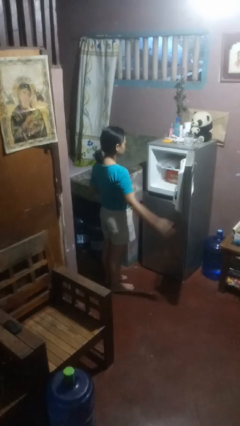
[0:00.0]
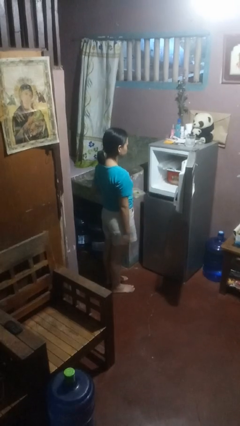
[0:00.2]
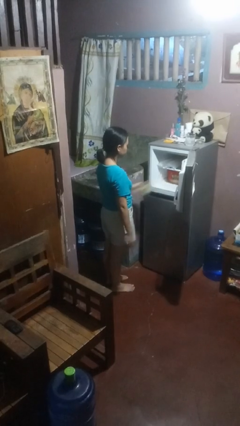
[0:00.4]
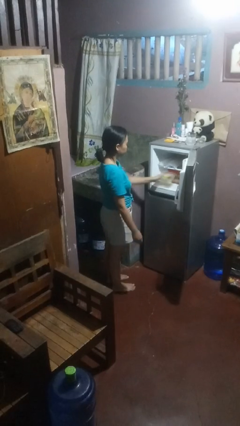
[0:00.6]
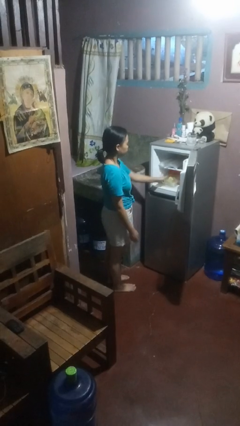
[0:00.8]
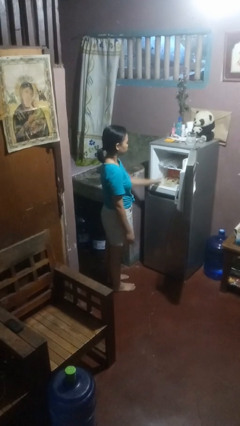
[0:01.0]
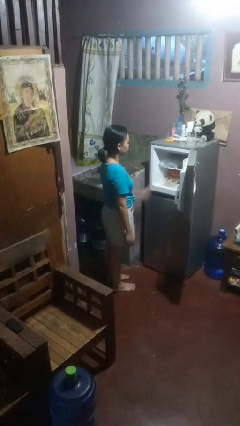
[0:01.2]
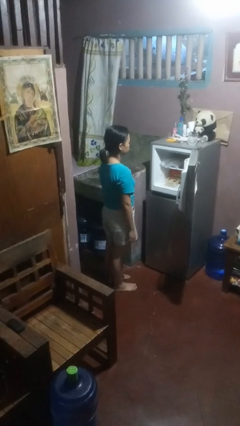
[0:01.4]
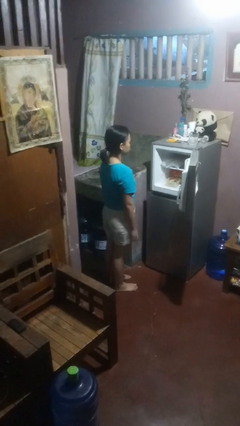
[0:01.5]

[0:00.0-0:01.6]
person puts object into refrigerator

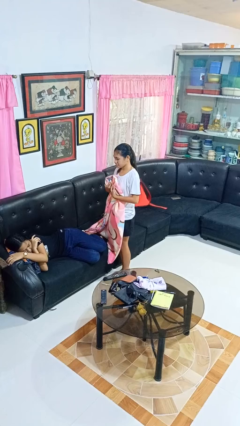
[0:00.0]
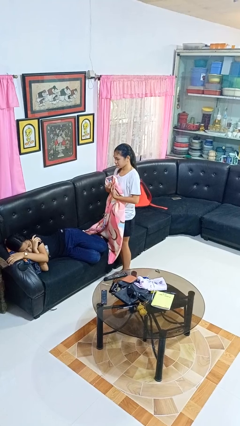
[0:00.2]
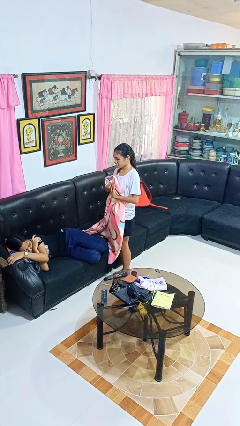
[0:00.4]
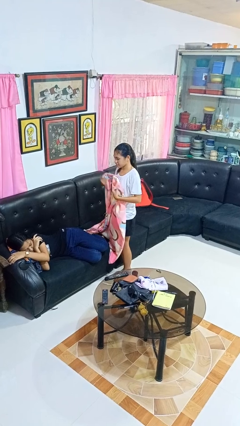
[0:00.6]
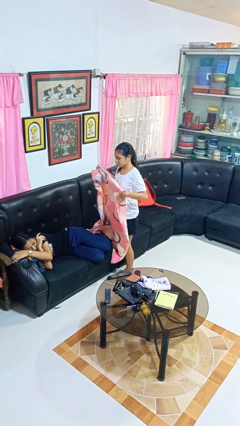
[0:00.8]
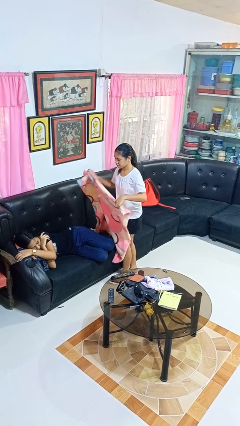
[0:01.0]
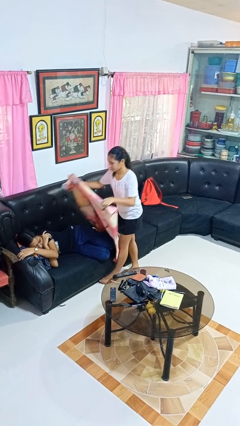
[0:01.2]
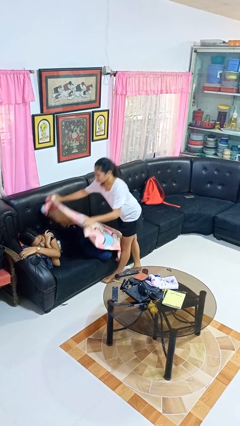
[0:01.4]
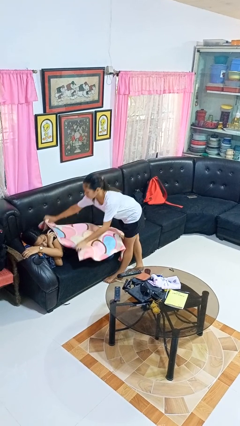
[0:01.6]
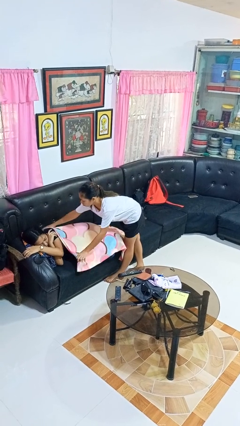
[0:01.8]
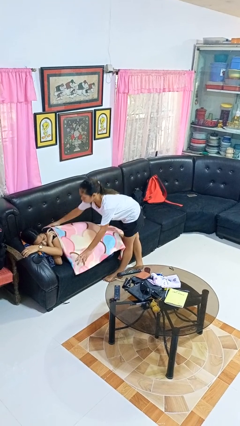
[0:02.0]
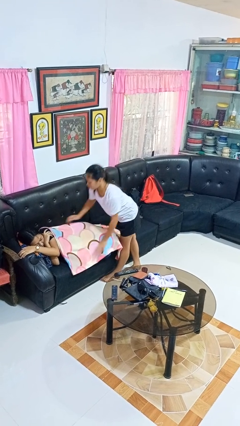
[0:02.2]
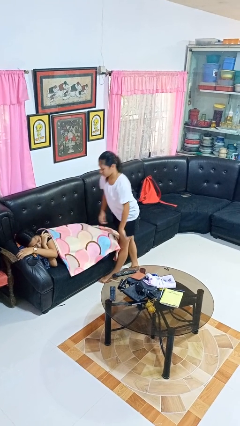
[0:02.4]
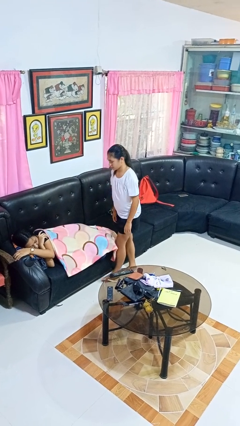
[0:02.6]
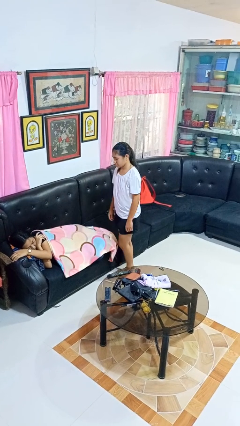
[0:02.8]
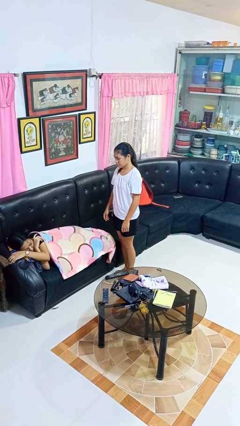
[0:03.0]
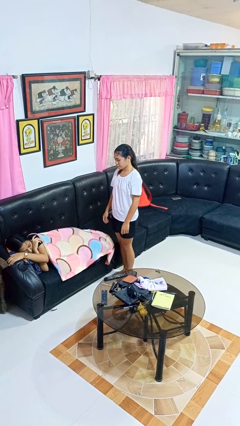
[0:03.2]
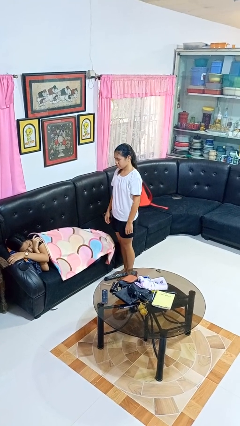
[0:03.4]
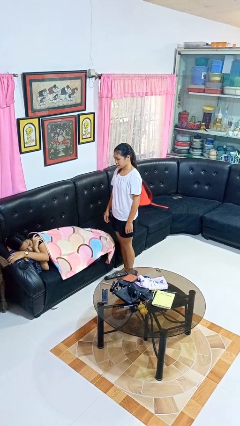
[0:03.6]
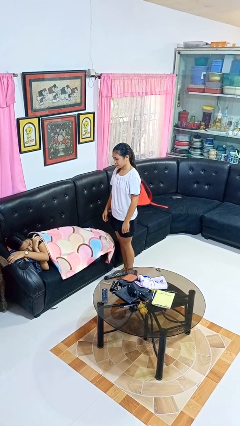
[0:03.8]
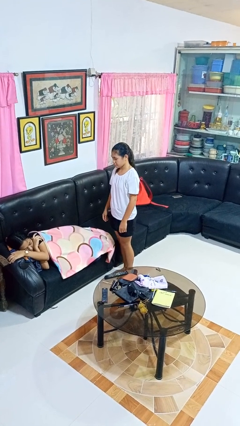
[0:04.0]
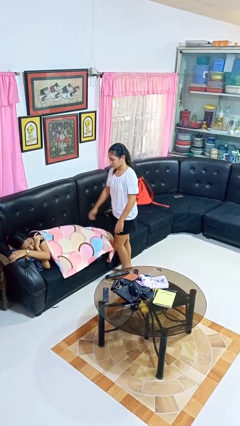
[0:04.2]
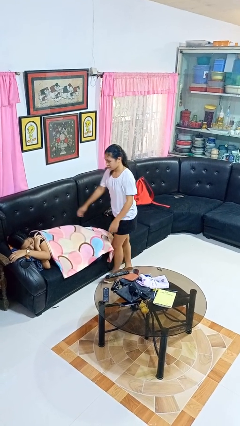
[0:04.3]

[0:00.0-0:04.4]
person covers friend with blanket

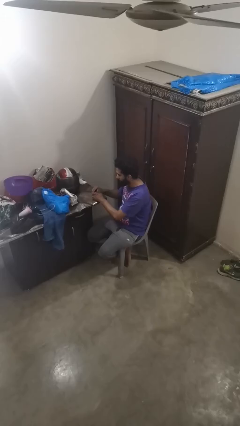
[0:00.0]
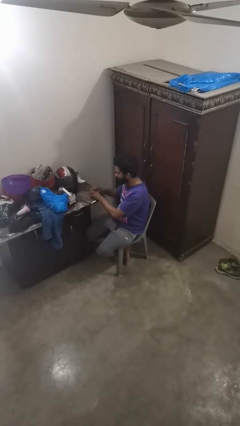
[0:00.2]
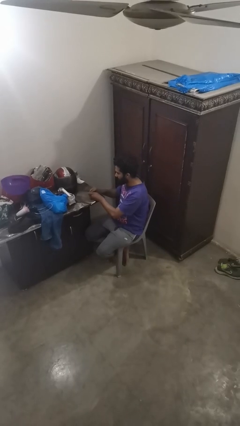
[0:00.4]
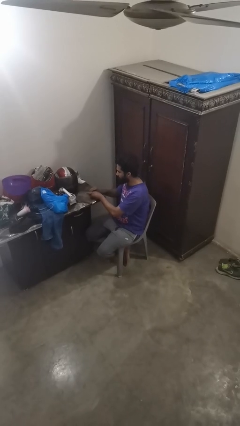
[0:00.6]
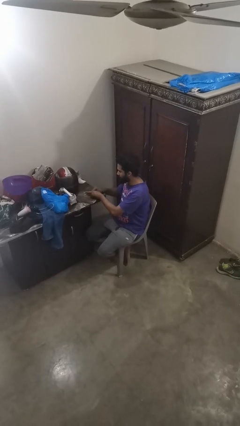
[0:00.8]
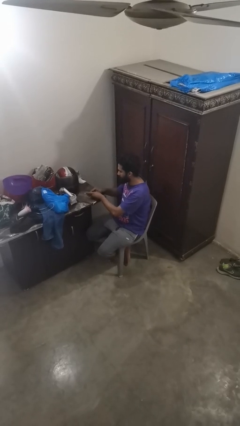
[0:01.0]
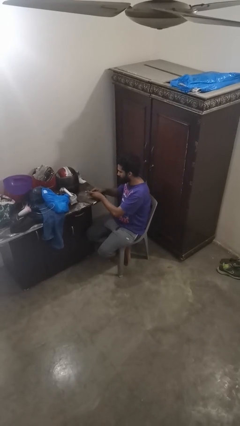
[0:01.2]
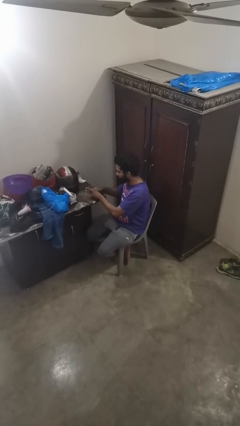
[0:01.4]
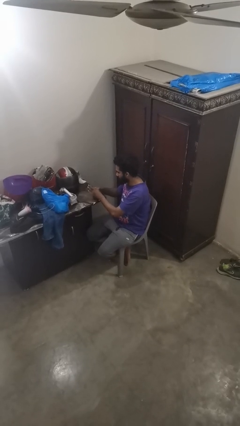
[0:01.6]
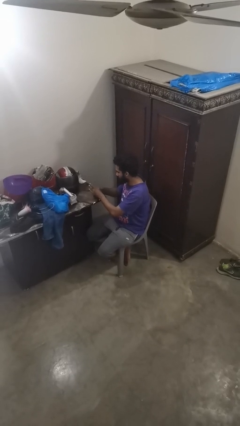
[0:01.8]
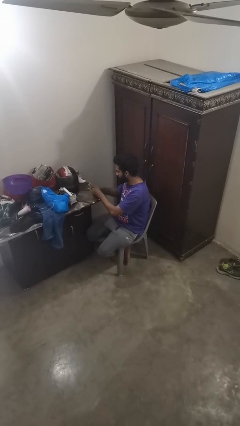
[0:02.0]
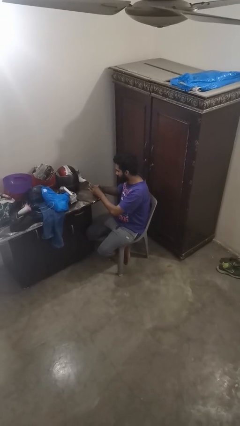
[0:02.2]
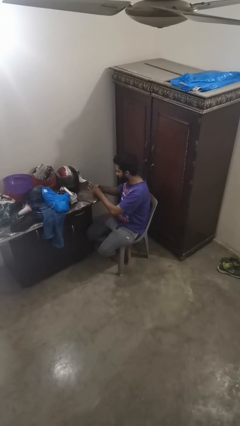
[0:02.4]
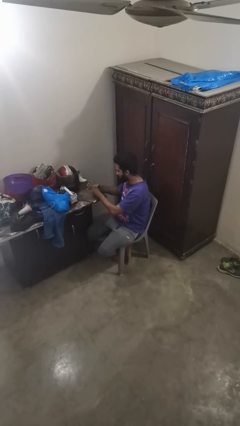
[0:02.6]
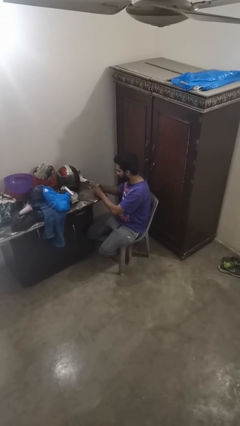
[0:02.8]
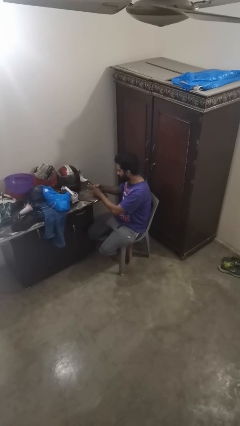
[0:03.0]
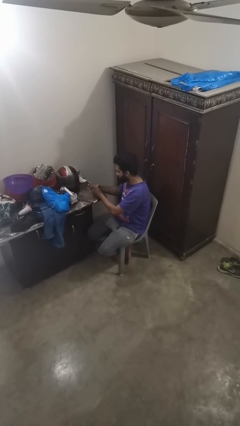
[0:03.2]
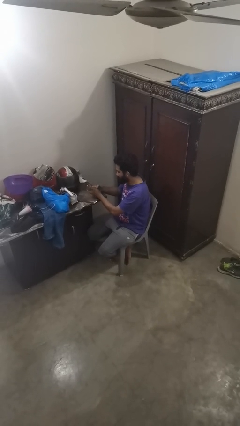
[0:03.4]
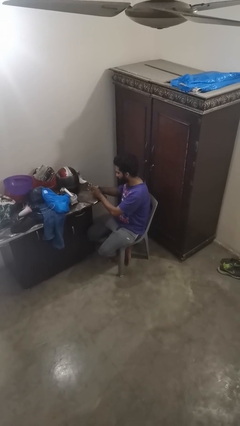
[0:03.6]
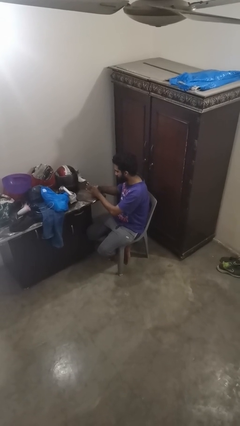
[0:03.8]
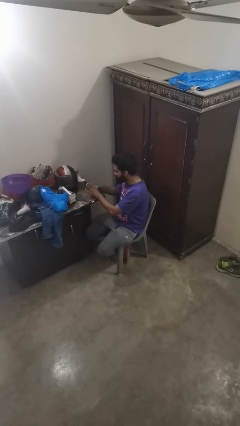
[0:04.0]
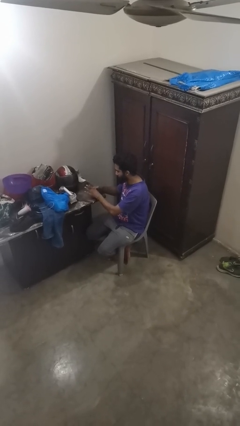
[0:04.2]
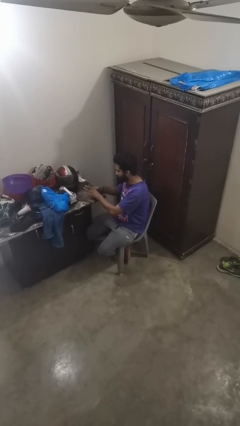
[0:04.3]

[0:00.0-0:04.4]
person paints fingernails

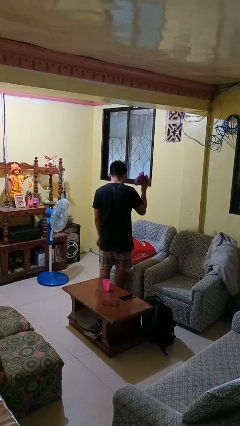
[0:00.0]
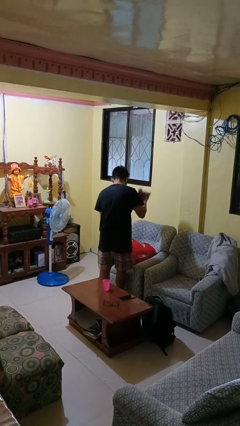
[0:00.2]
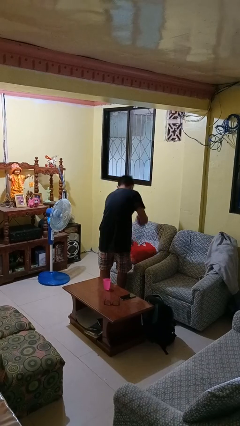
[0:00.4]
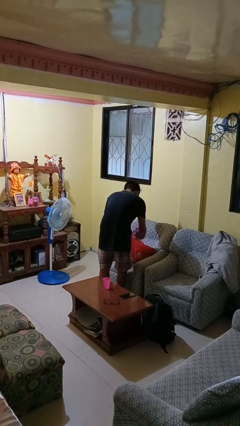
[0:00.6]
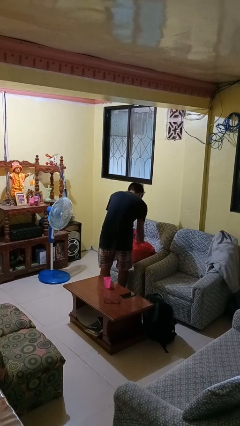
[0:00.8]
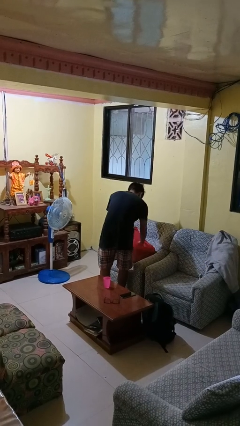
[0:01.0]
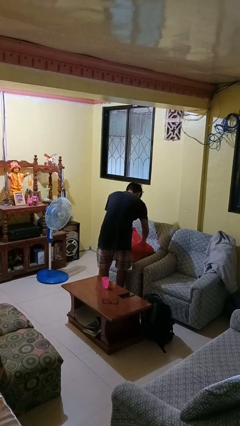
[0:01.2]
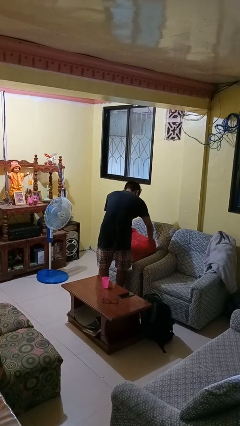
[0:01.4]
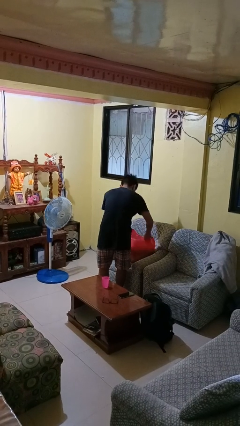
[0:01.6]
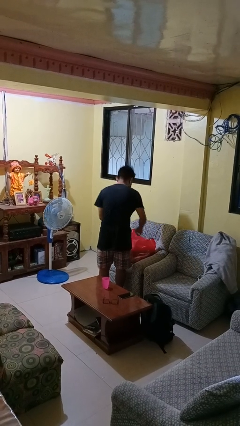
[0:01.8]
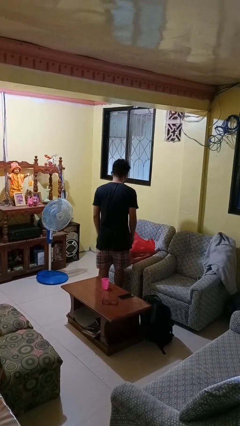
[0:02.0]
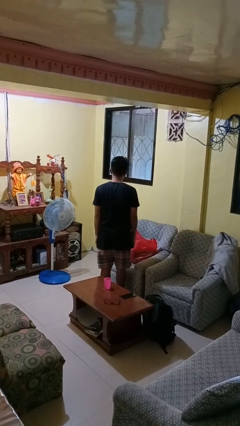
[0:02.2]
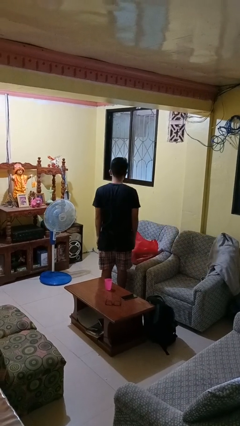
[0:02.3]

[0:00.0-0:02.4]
person puts object into bag

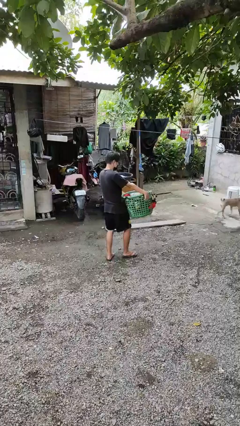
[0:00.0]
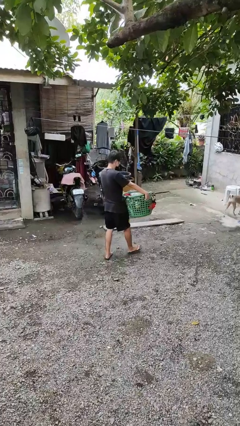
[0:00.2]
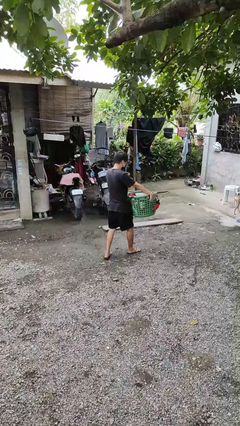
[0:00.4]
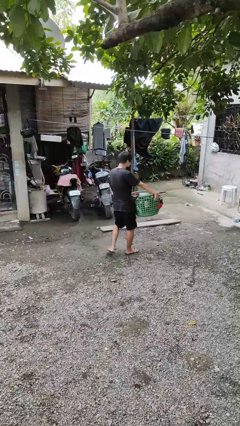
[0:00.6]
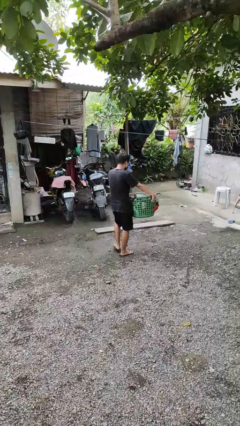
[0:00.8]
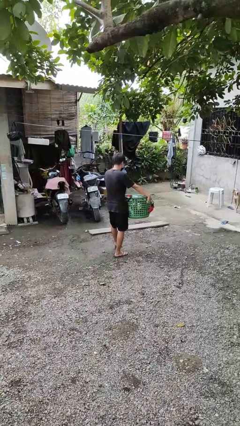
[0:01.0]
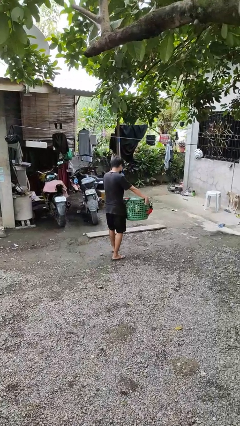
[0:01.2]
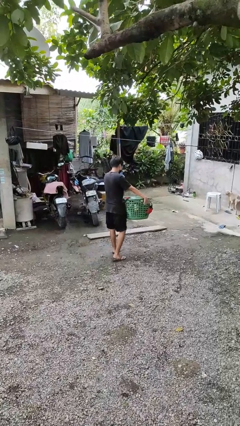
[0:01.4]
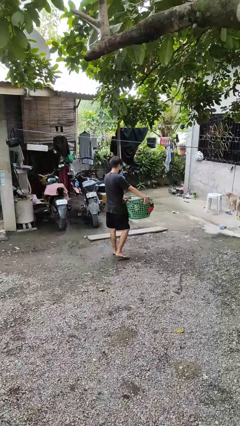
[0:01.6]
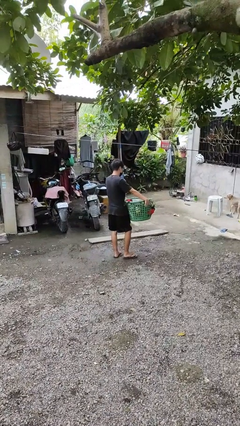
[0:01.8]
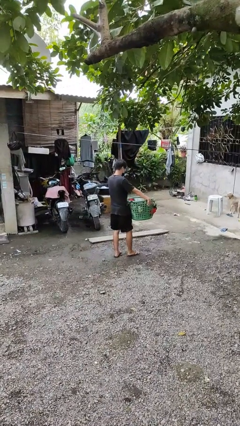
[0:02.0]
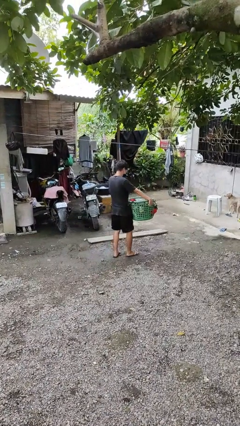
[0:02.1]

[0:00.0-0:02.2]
person carries laundry basket

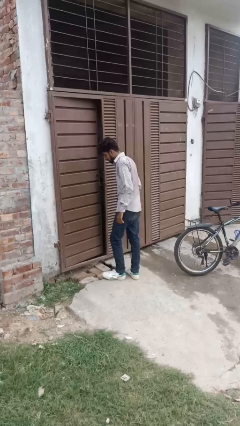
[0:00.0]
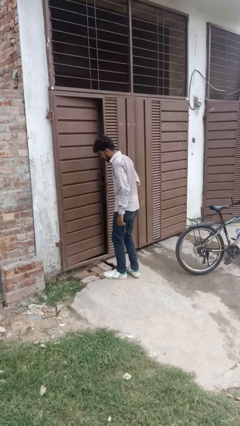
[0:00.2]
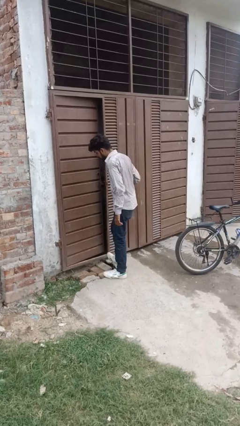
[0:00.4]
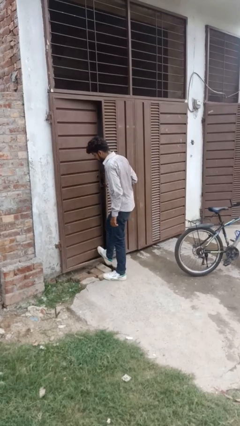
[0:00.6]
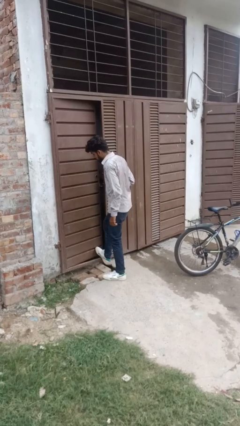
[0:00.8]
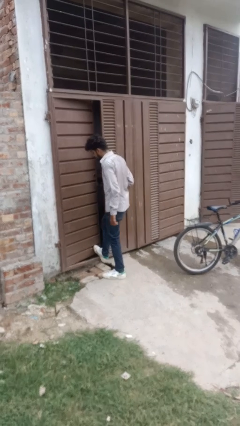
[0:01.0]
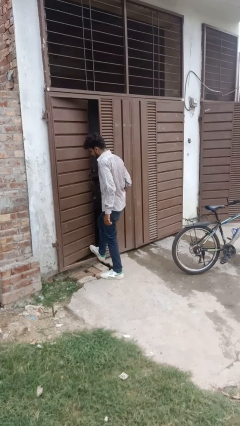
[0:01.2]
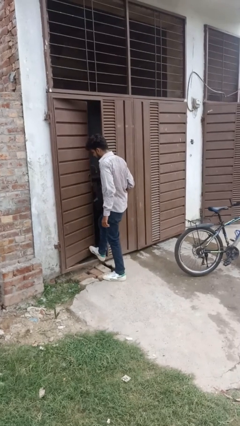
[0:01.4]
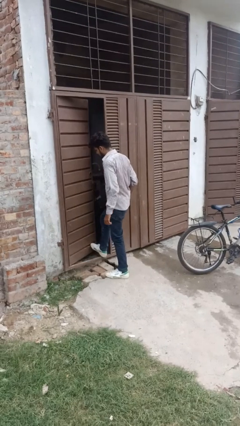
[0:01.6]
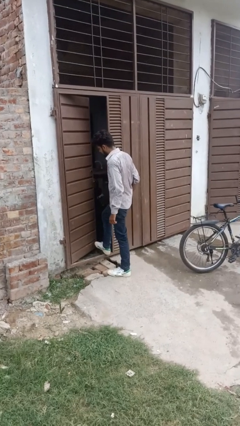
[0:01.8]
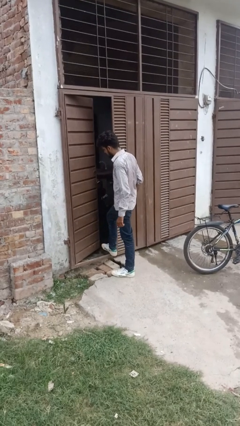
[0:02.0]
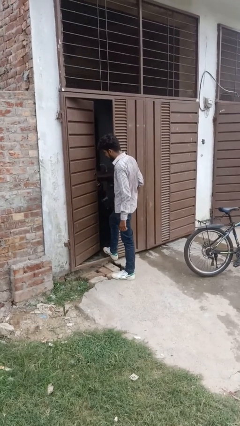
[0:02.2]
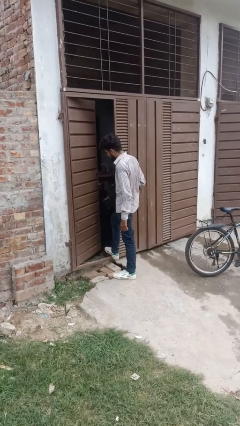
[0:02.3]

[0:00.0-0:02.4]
person opens facility door

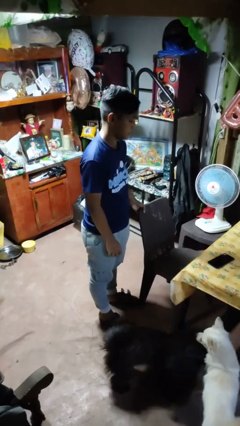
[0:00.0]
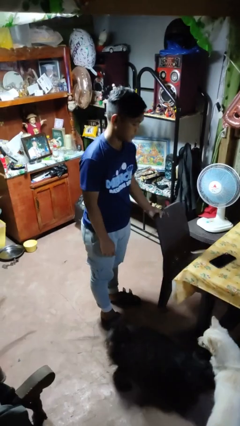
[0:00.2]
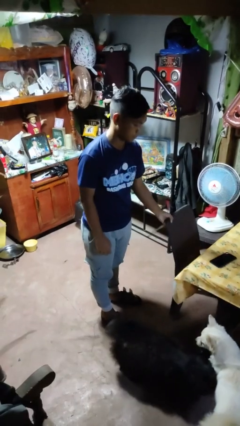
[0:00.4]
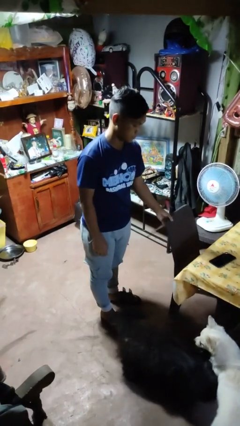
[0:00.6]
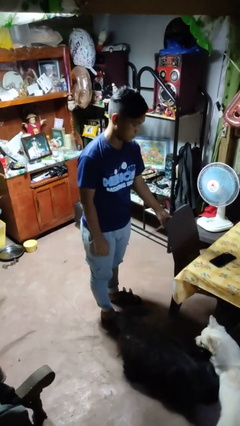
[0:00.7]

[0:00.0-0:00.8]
person pushes in chair
